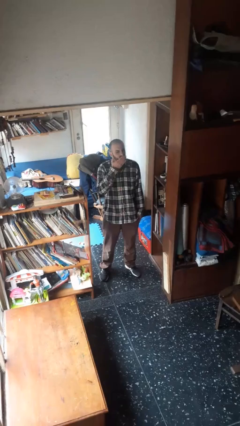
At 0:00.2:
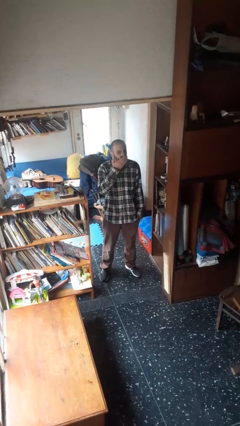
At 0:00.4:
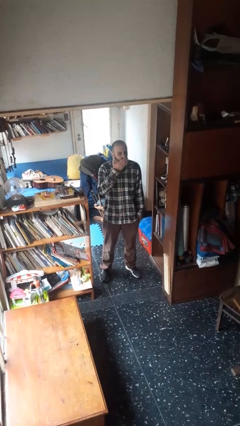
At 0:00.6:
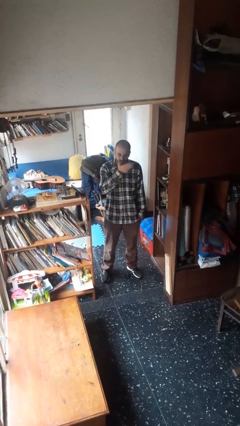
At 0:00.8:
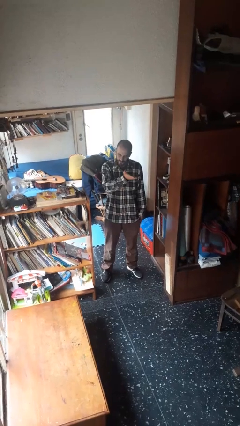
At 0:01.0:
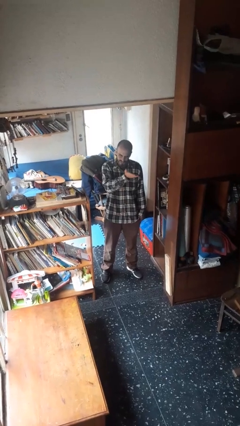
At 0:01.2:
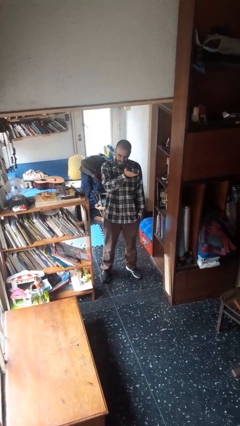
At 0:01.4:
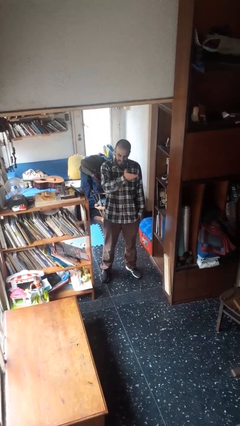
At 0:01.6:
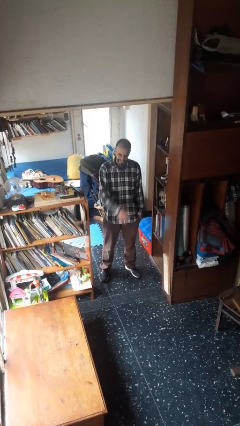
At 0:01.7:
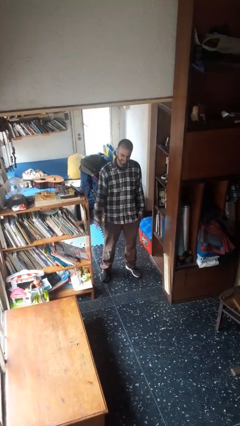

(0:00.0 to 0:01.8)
person gestures blow kiss

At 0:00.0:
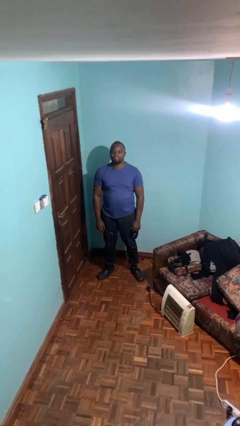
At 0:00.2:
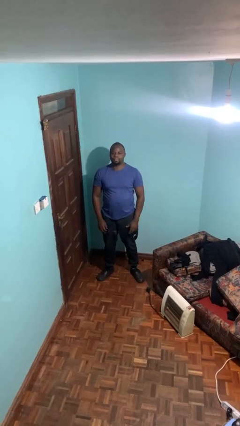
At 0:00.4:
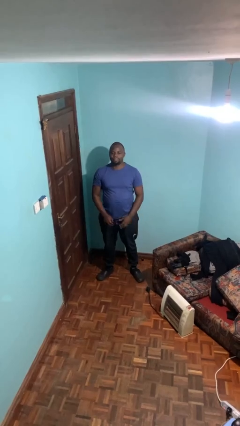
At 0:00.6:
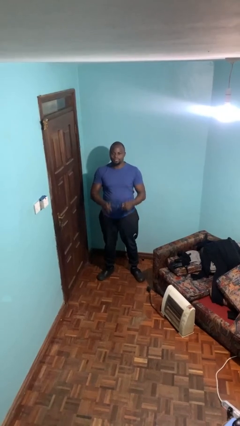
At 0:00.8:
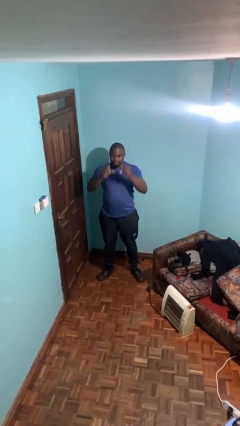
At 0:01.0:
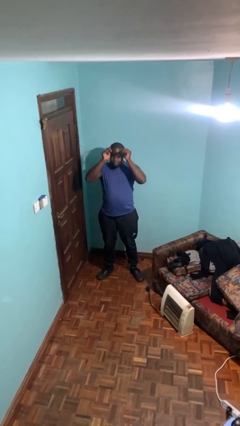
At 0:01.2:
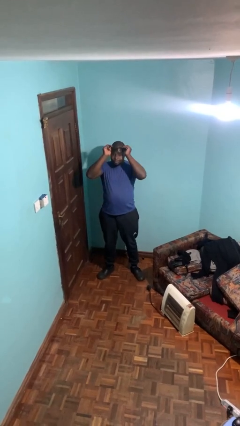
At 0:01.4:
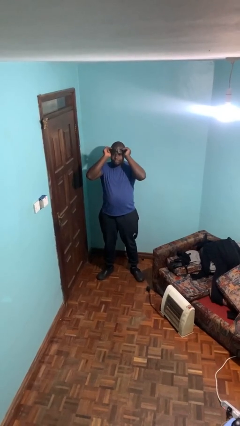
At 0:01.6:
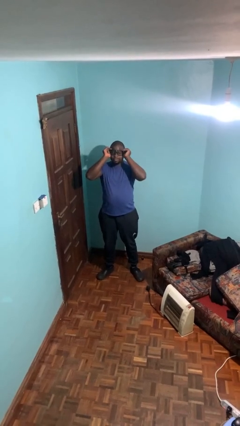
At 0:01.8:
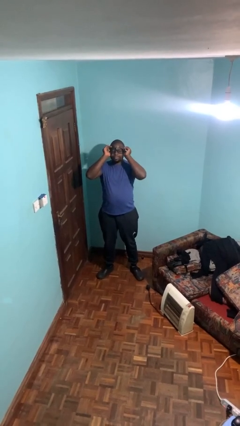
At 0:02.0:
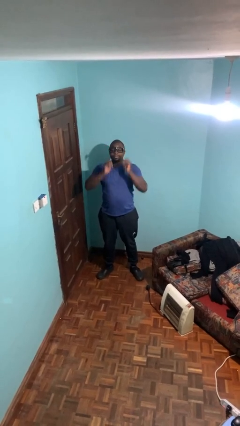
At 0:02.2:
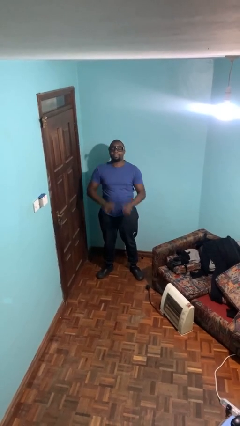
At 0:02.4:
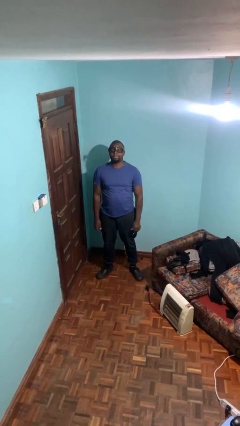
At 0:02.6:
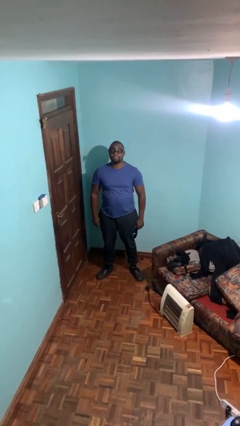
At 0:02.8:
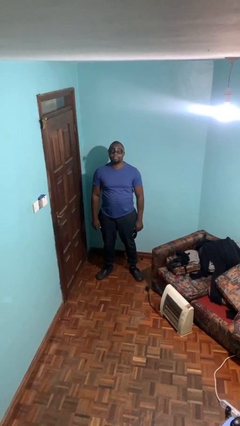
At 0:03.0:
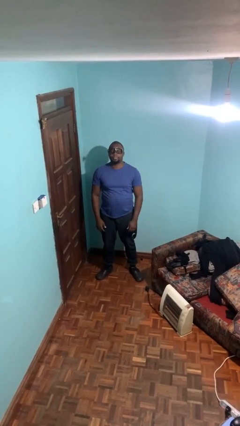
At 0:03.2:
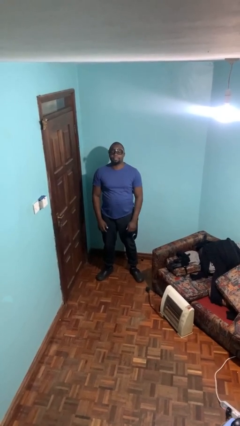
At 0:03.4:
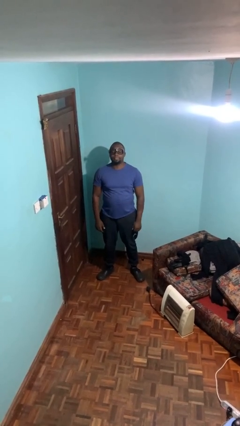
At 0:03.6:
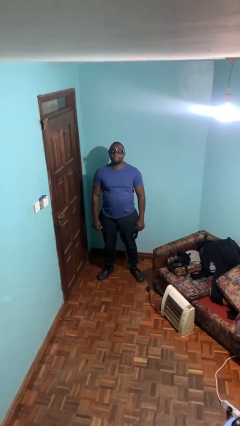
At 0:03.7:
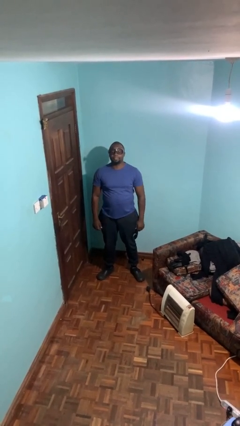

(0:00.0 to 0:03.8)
person puts on glasses

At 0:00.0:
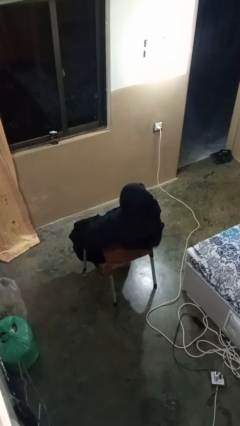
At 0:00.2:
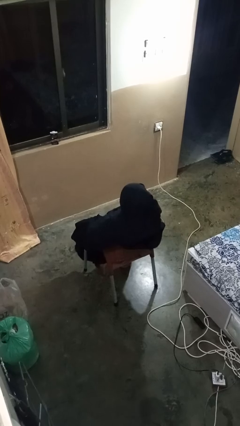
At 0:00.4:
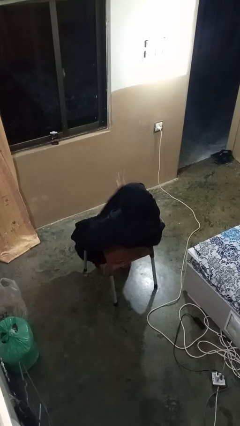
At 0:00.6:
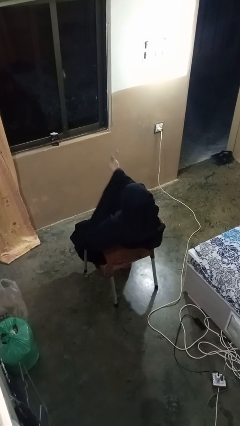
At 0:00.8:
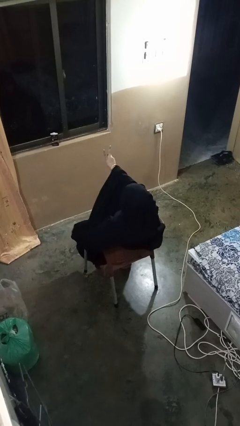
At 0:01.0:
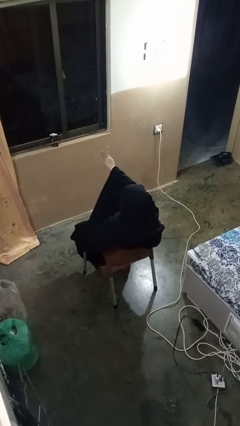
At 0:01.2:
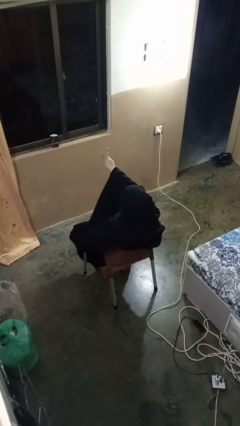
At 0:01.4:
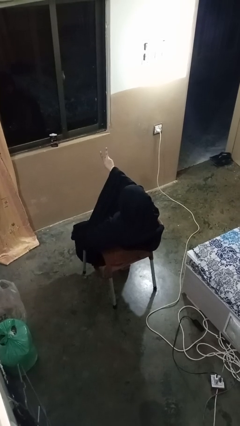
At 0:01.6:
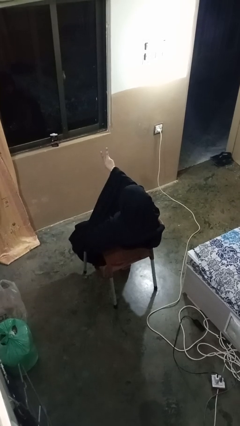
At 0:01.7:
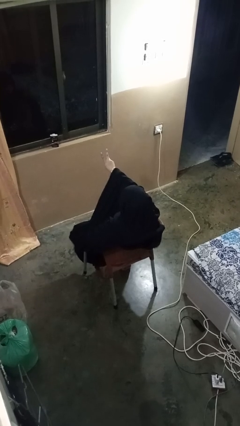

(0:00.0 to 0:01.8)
person gestures peace

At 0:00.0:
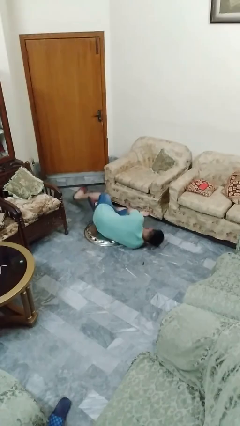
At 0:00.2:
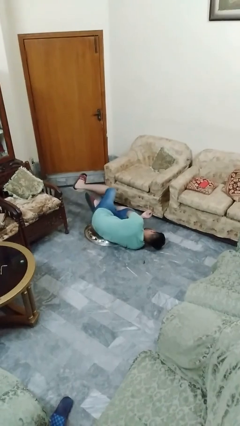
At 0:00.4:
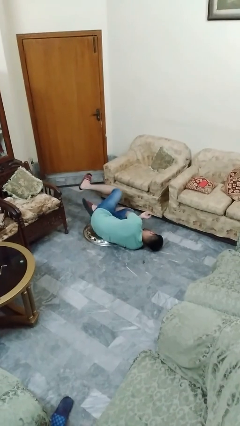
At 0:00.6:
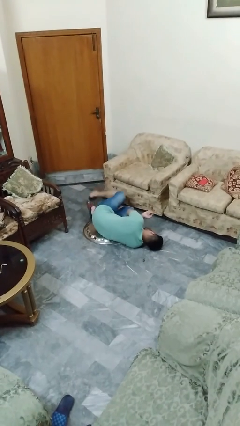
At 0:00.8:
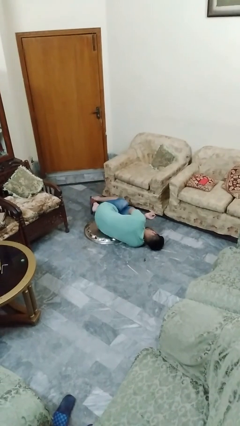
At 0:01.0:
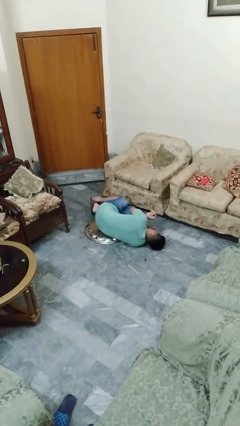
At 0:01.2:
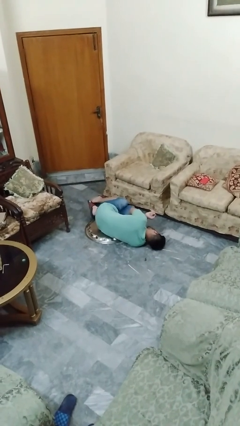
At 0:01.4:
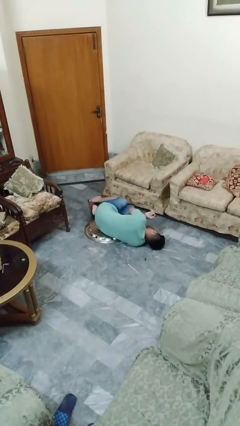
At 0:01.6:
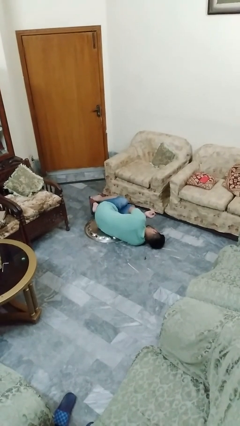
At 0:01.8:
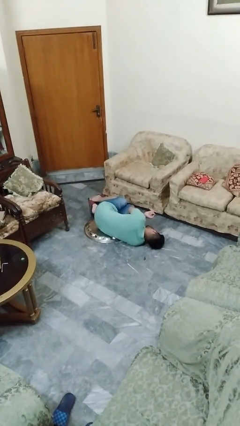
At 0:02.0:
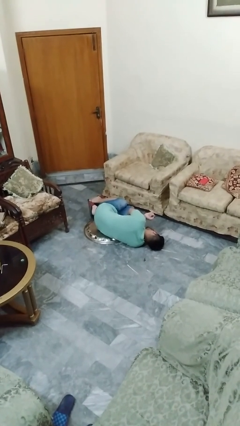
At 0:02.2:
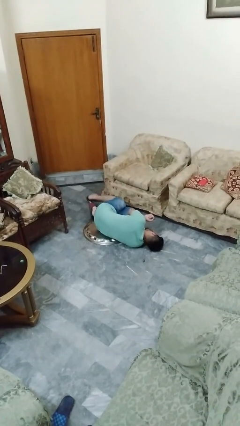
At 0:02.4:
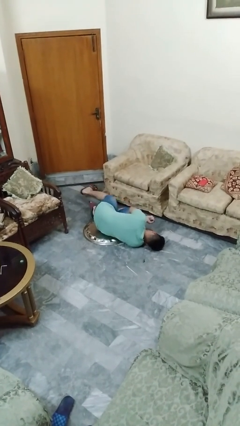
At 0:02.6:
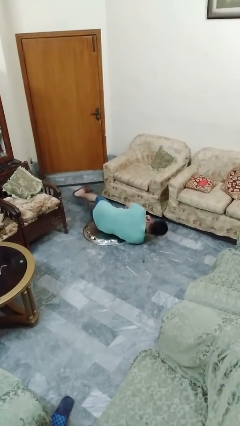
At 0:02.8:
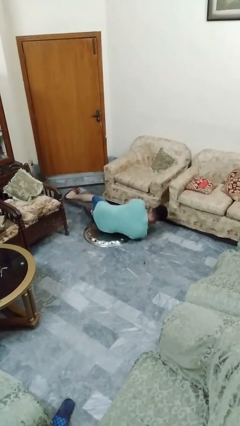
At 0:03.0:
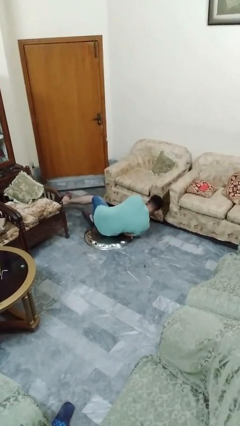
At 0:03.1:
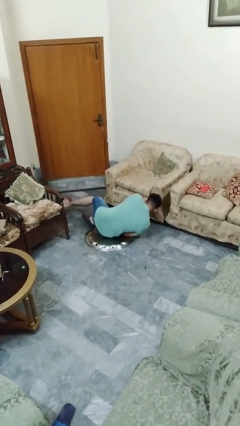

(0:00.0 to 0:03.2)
person lies down on floor

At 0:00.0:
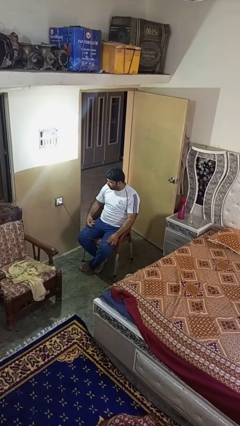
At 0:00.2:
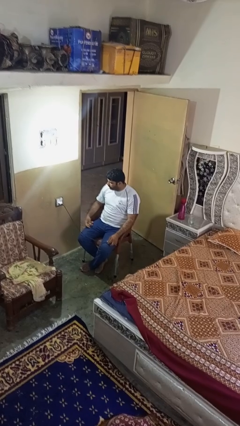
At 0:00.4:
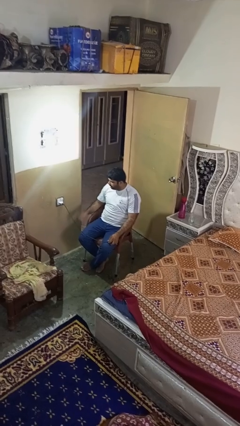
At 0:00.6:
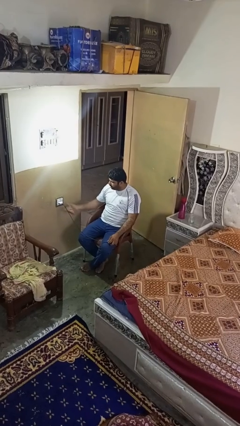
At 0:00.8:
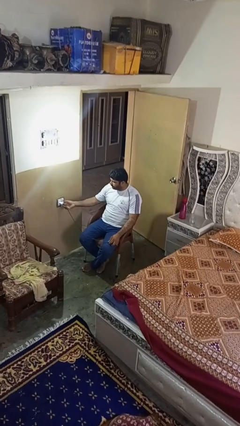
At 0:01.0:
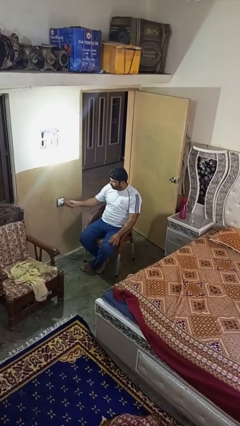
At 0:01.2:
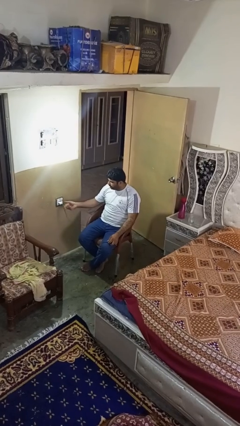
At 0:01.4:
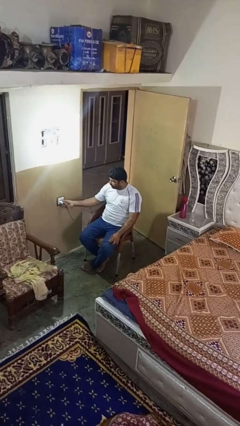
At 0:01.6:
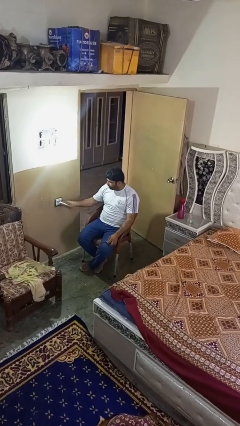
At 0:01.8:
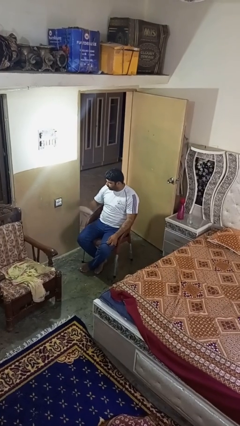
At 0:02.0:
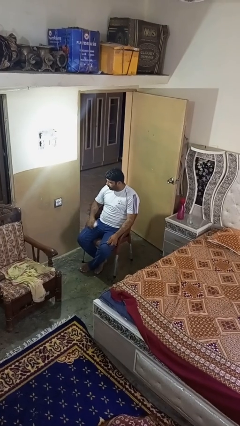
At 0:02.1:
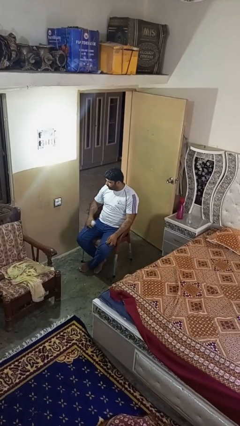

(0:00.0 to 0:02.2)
person unplugs from electrical socket

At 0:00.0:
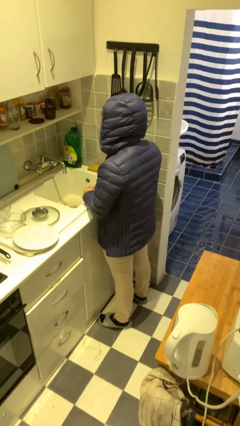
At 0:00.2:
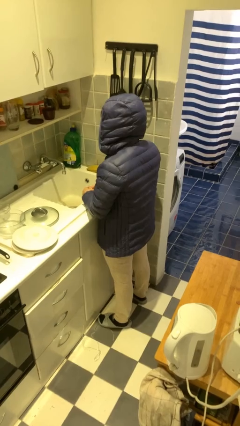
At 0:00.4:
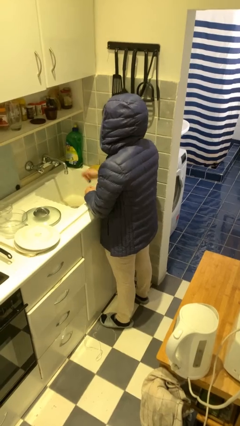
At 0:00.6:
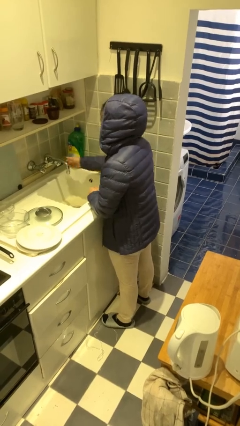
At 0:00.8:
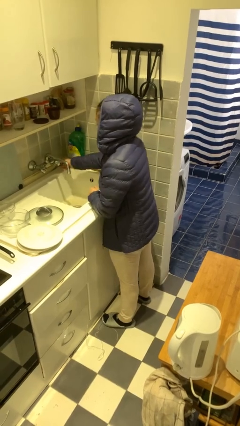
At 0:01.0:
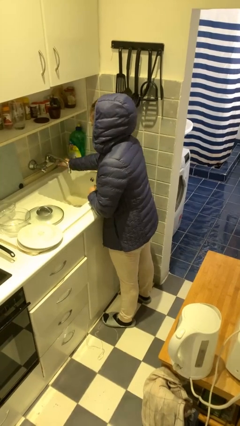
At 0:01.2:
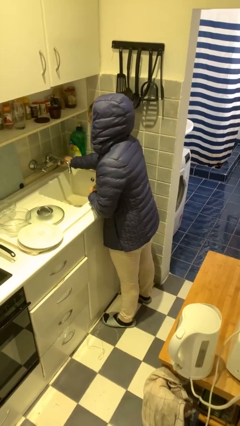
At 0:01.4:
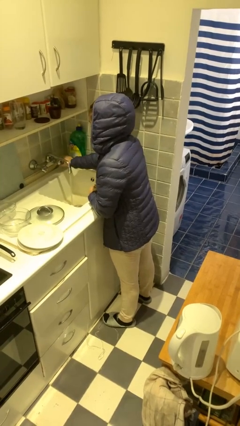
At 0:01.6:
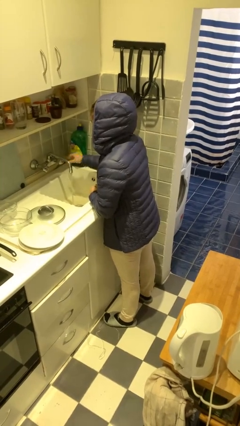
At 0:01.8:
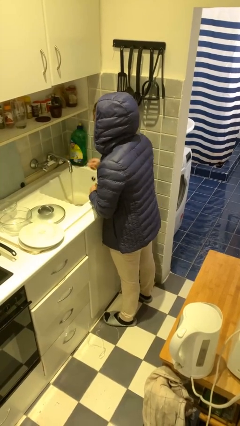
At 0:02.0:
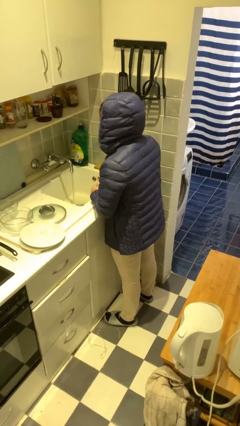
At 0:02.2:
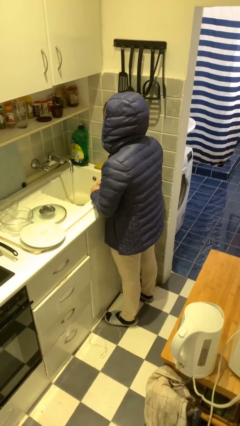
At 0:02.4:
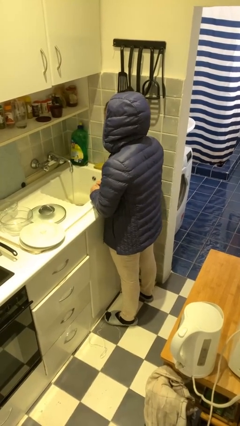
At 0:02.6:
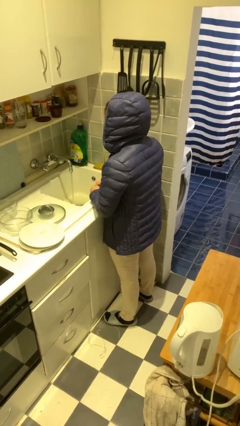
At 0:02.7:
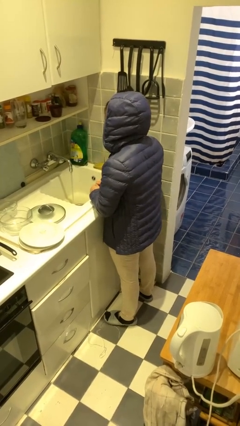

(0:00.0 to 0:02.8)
person turns on faucet

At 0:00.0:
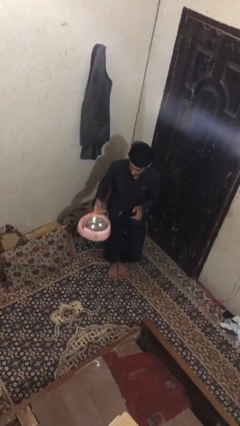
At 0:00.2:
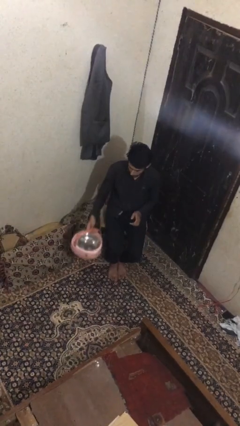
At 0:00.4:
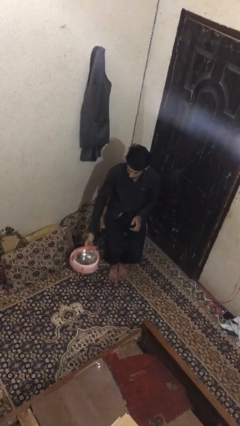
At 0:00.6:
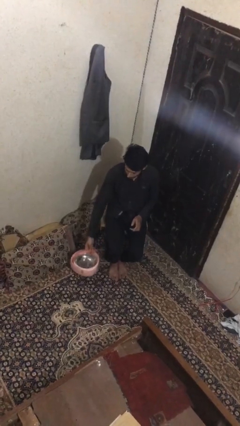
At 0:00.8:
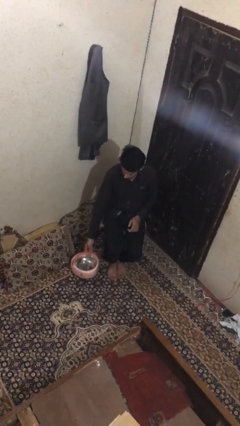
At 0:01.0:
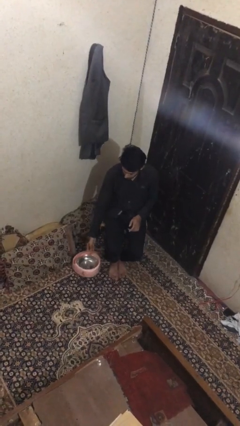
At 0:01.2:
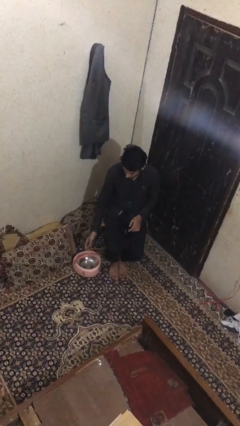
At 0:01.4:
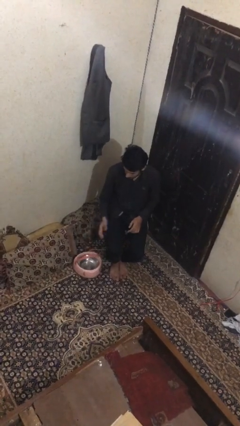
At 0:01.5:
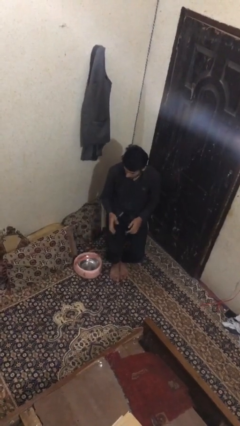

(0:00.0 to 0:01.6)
person puts down object on floor
